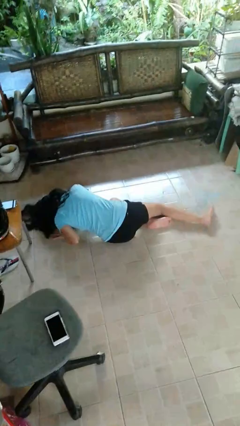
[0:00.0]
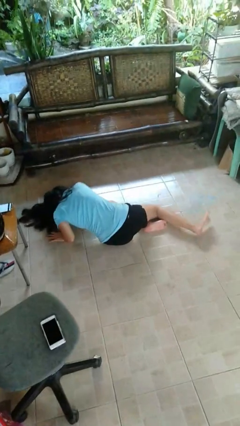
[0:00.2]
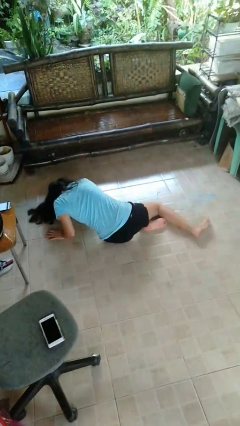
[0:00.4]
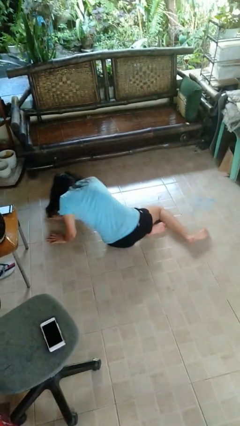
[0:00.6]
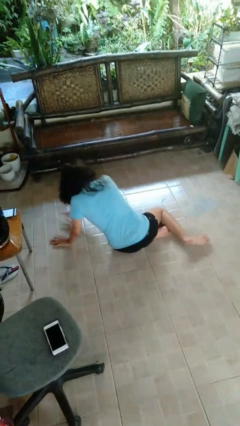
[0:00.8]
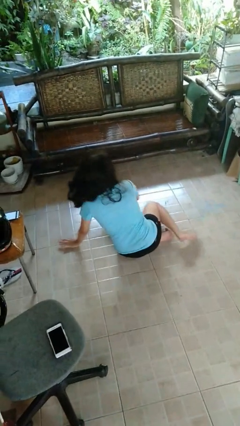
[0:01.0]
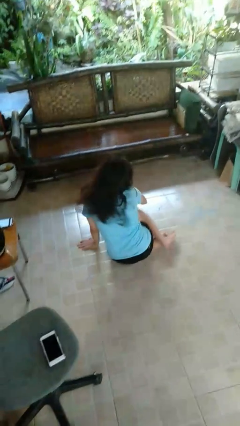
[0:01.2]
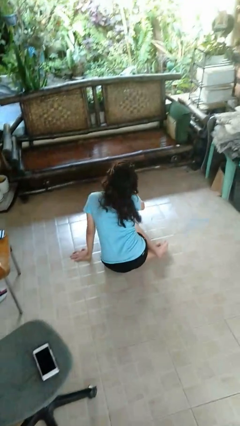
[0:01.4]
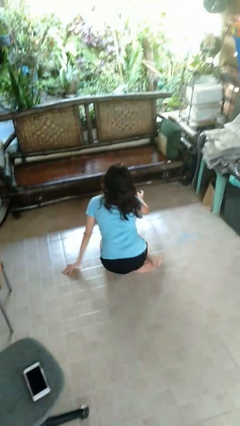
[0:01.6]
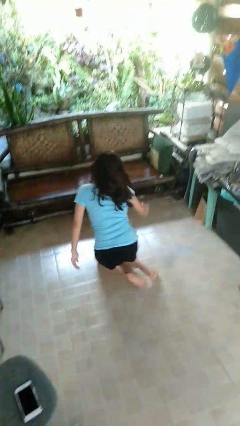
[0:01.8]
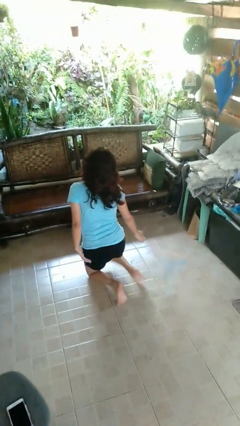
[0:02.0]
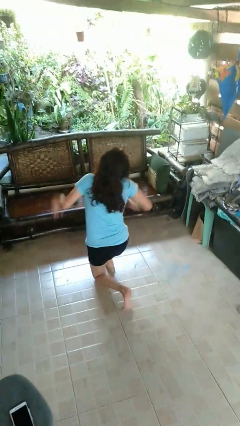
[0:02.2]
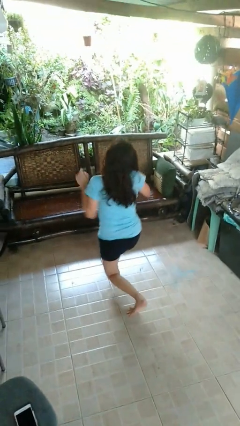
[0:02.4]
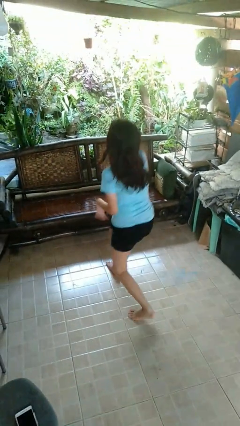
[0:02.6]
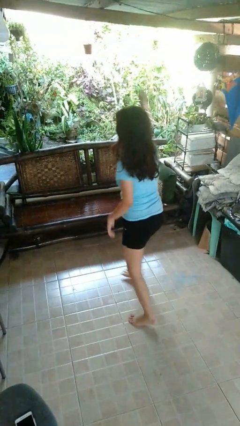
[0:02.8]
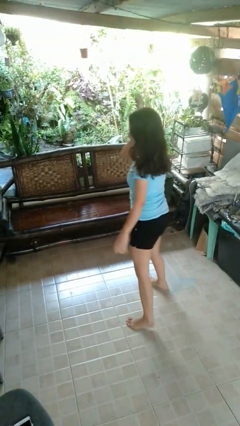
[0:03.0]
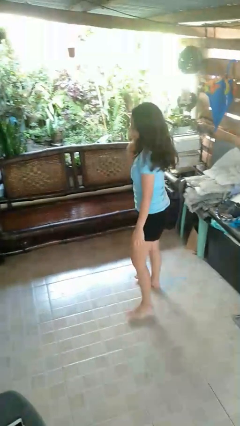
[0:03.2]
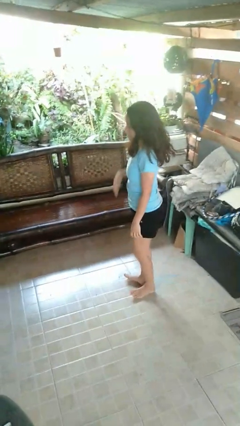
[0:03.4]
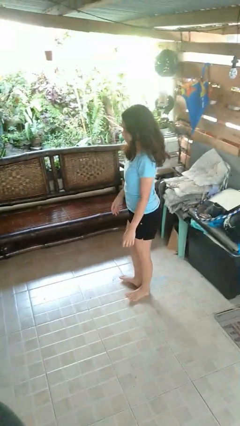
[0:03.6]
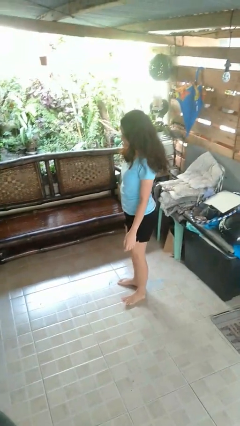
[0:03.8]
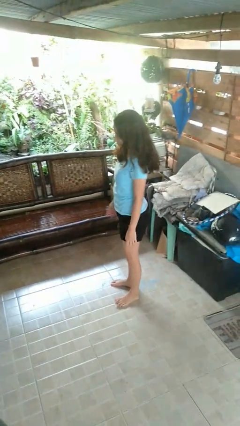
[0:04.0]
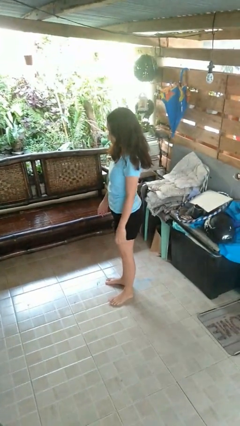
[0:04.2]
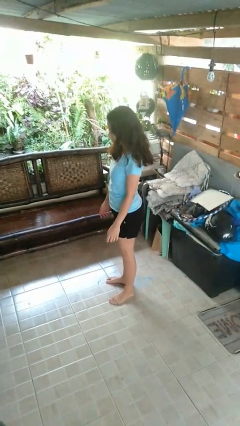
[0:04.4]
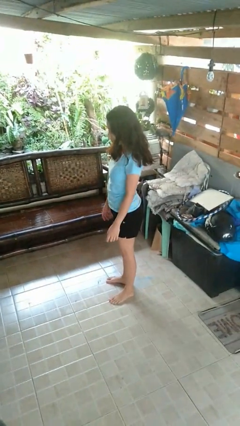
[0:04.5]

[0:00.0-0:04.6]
person stands up from floor

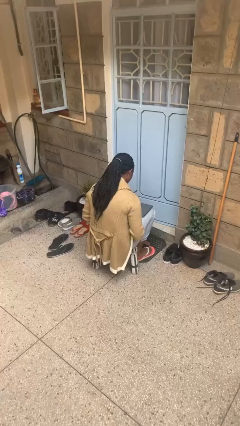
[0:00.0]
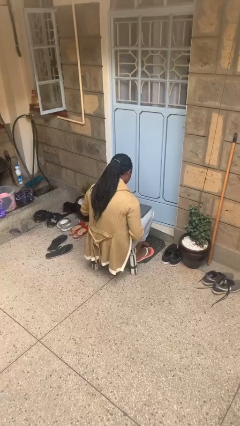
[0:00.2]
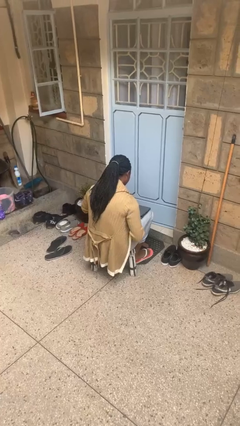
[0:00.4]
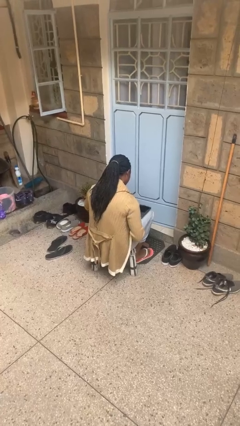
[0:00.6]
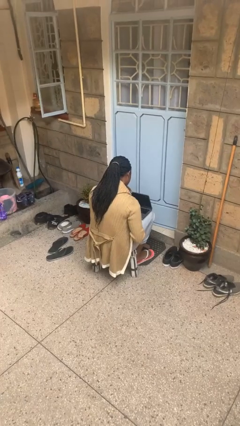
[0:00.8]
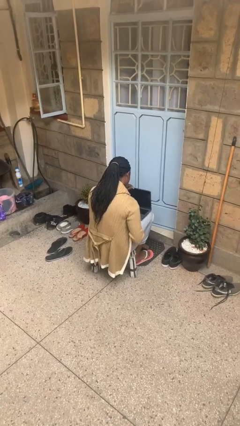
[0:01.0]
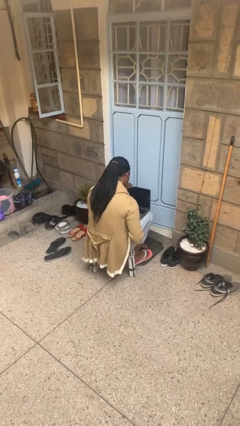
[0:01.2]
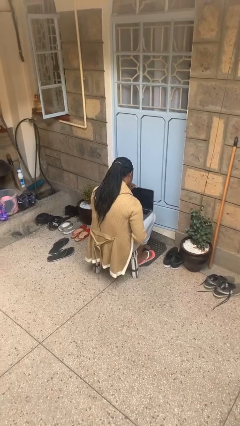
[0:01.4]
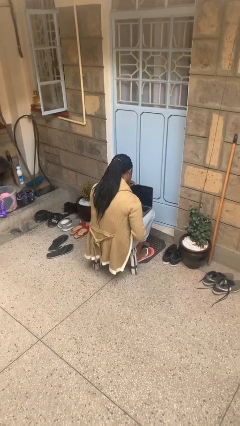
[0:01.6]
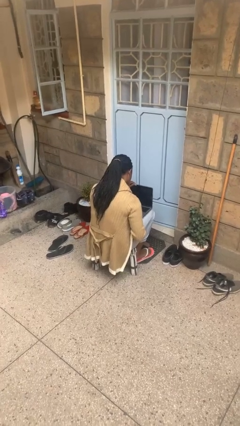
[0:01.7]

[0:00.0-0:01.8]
person opens laptop

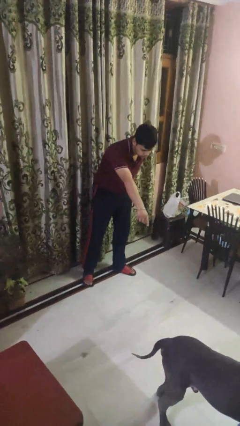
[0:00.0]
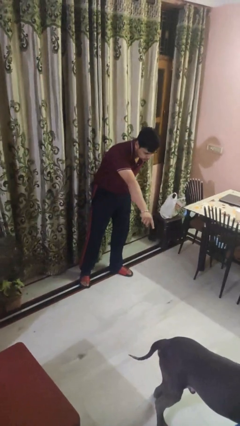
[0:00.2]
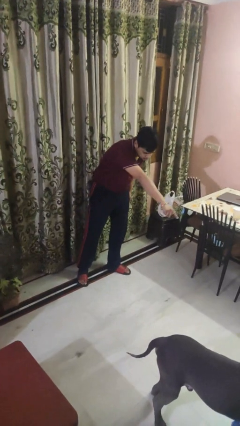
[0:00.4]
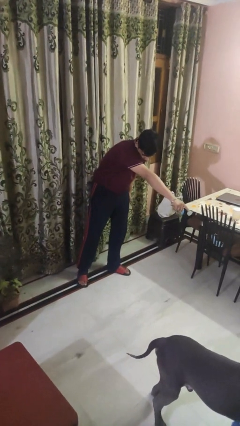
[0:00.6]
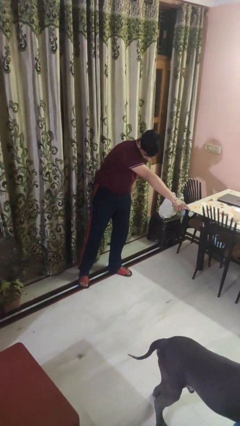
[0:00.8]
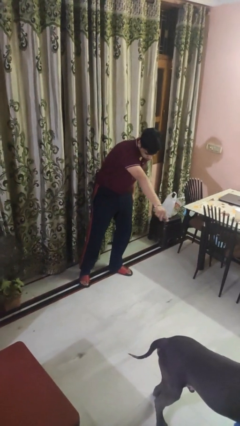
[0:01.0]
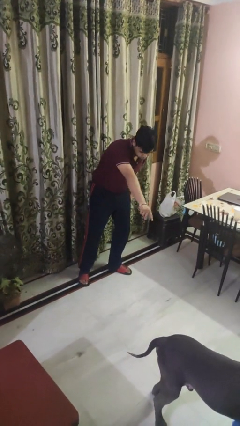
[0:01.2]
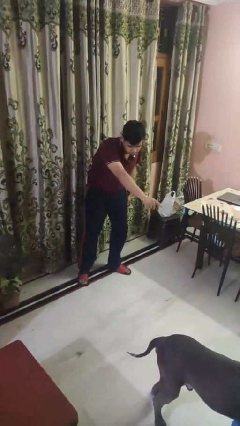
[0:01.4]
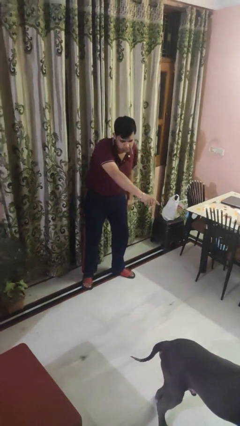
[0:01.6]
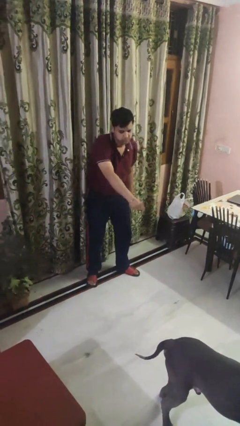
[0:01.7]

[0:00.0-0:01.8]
person points to dog

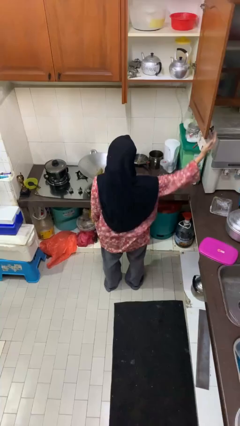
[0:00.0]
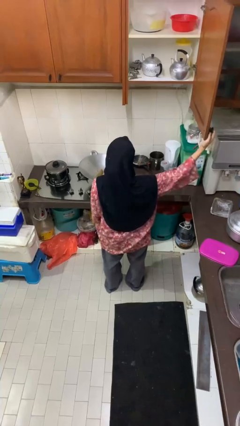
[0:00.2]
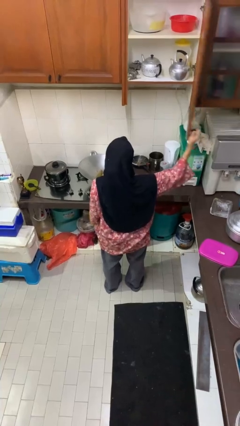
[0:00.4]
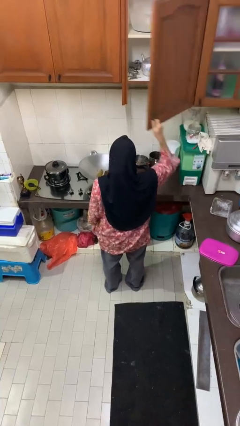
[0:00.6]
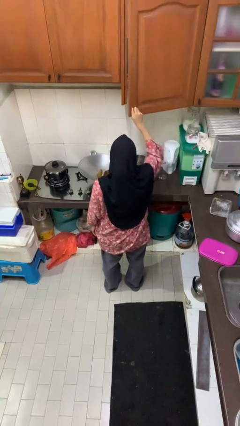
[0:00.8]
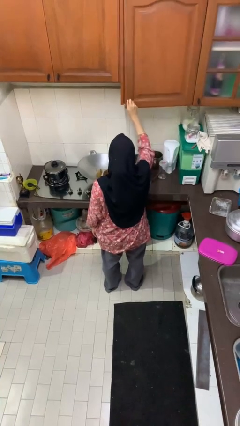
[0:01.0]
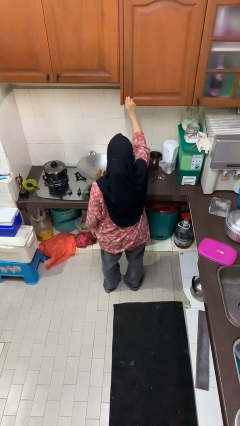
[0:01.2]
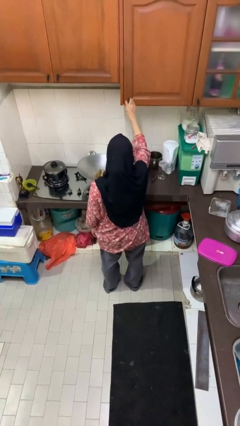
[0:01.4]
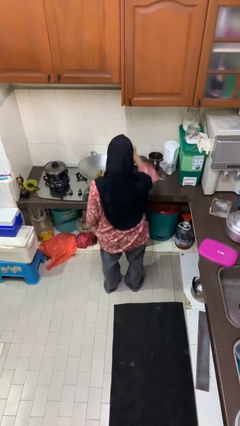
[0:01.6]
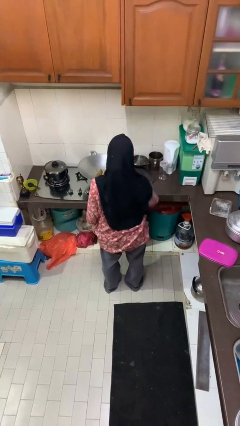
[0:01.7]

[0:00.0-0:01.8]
person closes cabinet

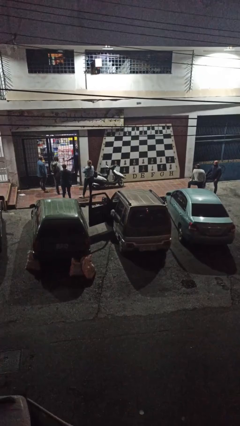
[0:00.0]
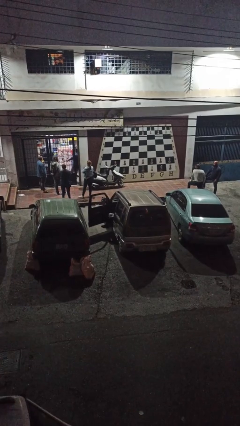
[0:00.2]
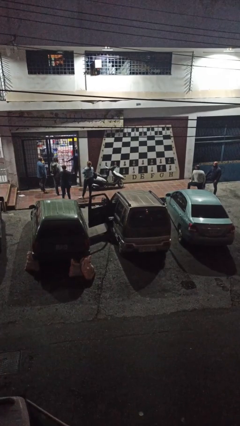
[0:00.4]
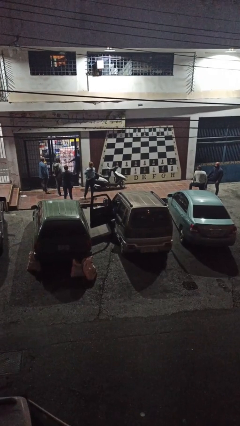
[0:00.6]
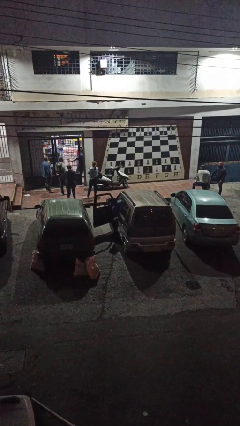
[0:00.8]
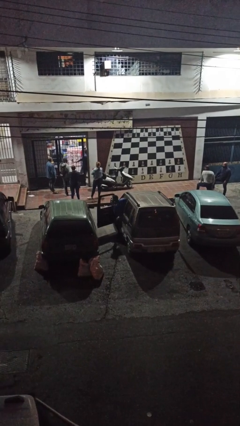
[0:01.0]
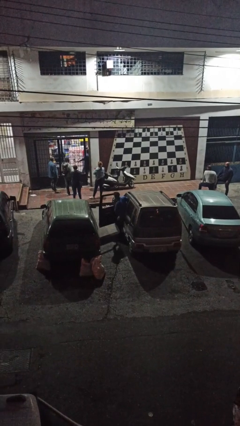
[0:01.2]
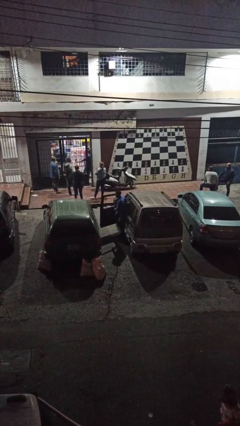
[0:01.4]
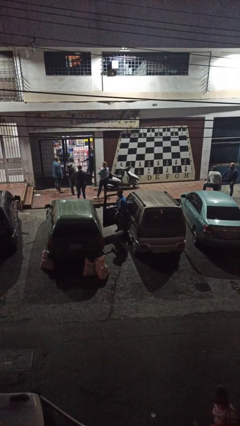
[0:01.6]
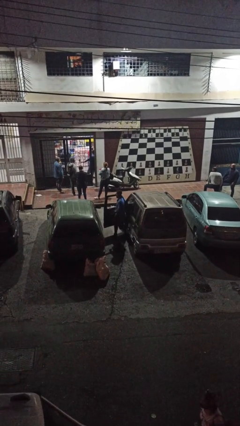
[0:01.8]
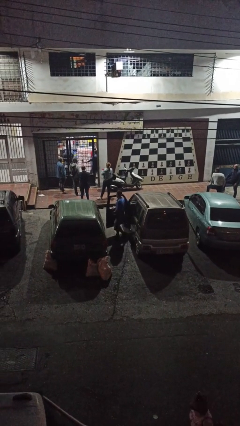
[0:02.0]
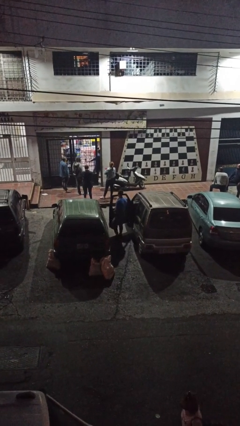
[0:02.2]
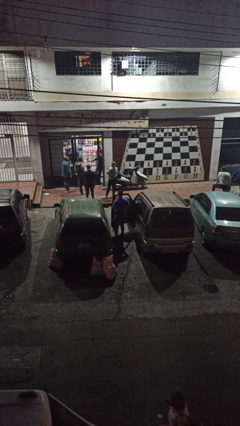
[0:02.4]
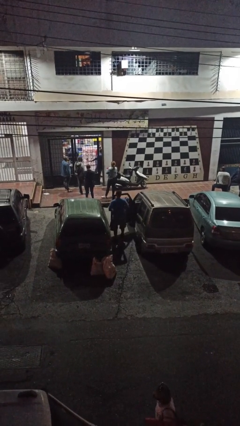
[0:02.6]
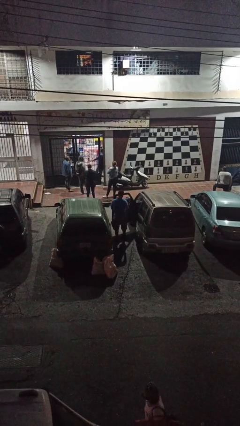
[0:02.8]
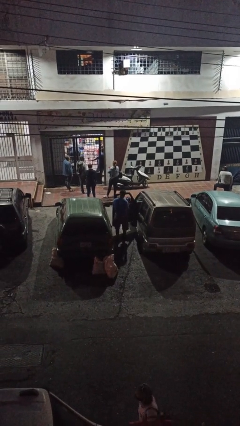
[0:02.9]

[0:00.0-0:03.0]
person exits car

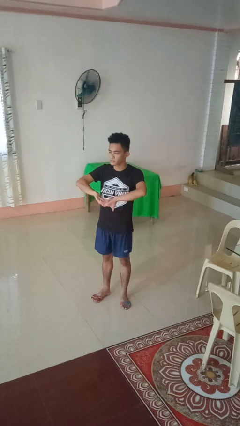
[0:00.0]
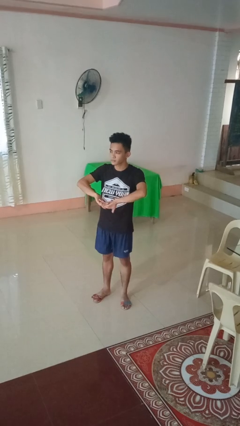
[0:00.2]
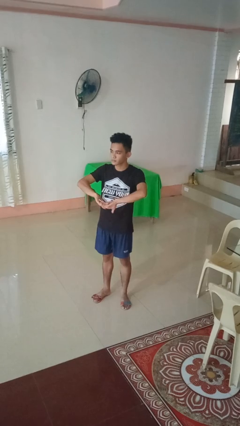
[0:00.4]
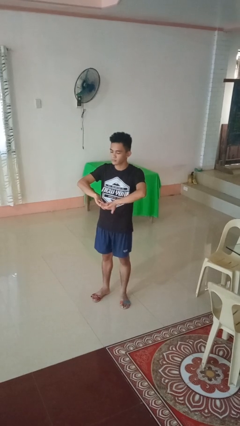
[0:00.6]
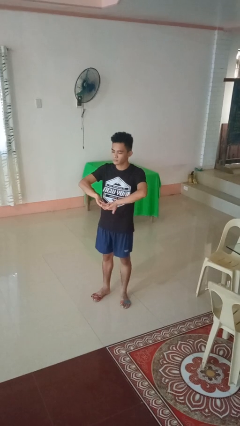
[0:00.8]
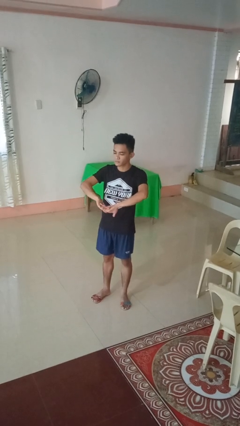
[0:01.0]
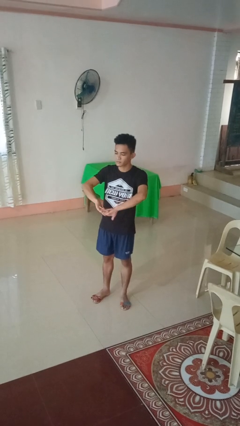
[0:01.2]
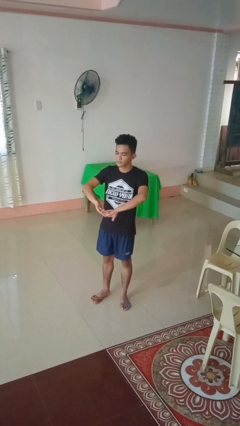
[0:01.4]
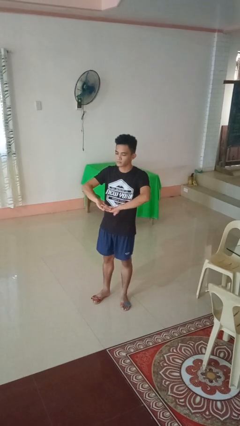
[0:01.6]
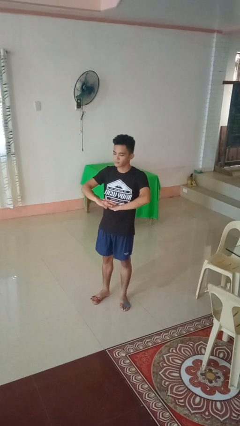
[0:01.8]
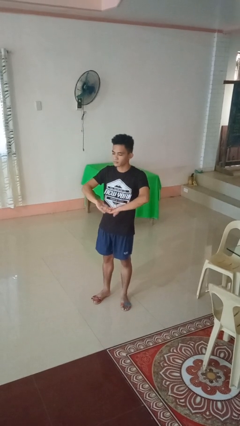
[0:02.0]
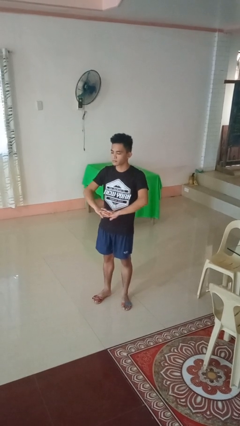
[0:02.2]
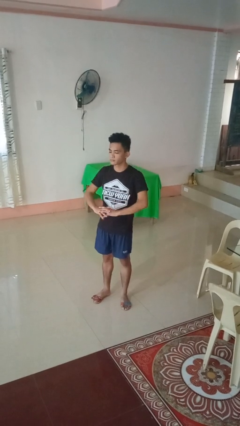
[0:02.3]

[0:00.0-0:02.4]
person cracks knuckles

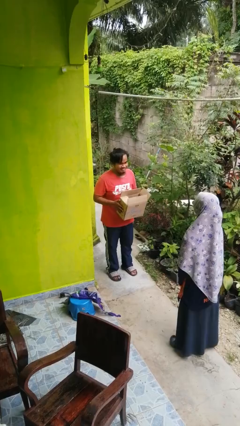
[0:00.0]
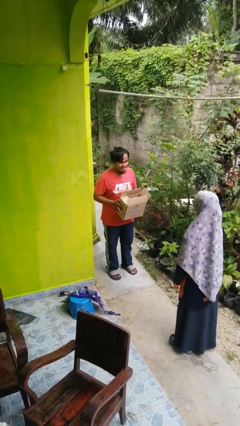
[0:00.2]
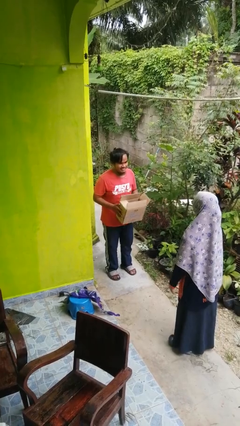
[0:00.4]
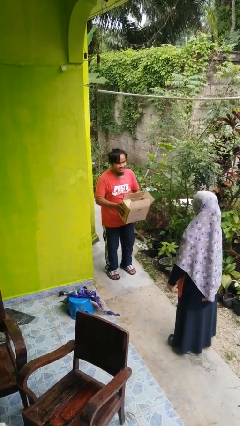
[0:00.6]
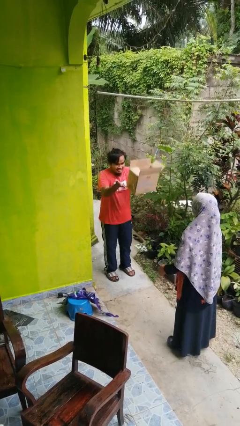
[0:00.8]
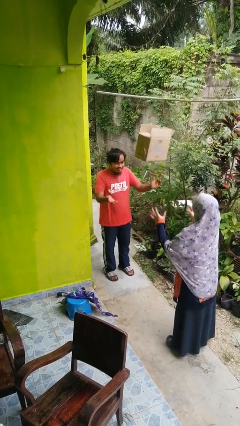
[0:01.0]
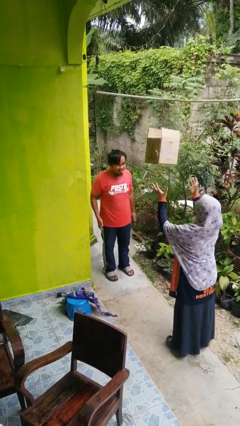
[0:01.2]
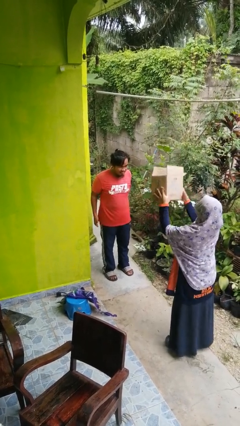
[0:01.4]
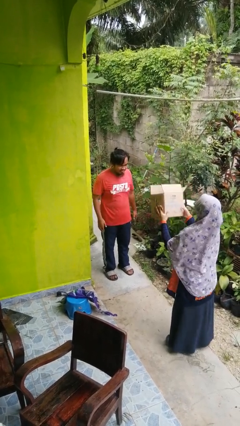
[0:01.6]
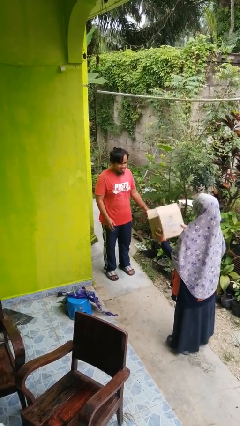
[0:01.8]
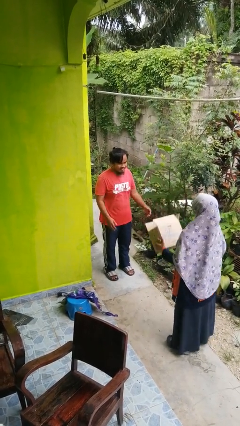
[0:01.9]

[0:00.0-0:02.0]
person throws object to person
